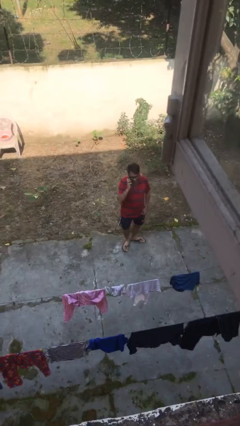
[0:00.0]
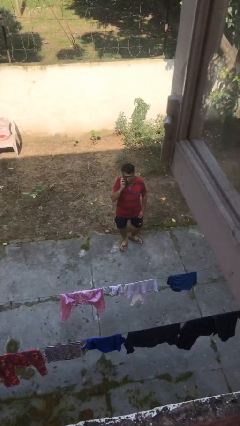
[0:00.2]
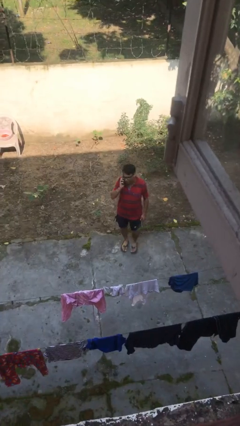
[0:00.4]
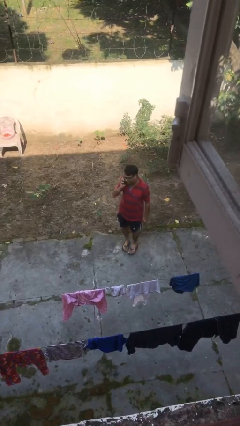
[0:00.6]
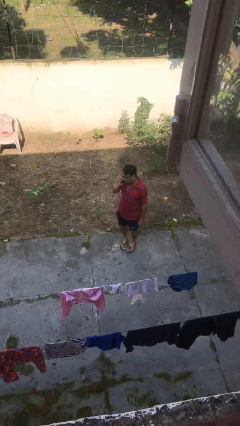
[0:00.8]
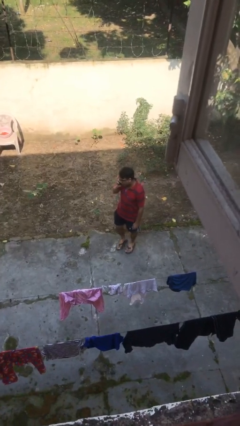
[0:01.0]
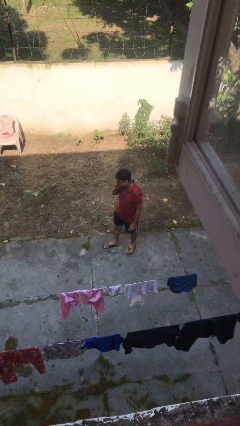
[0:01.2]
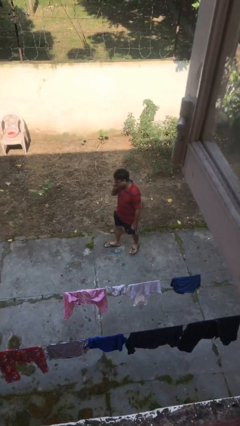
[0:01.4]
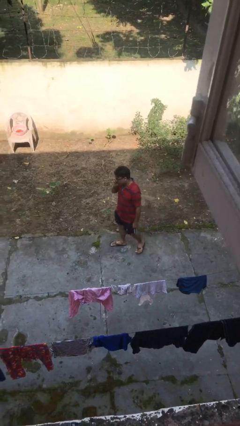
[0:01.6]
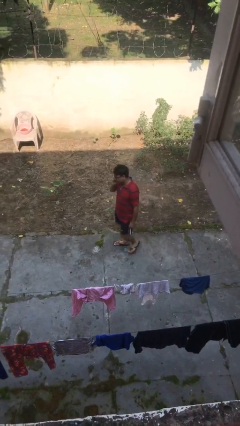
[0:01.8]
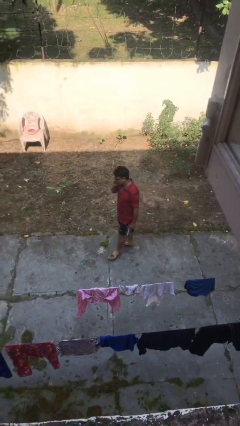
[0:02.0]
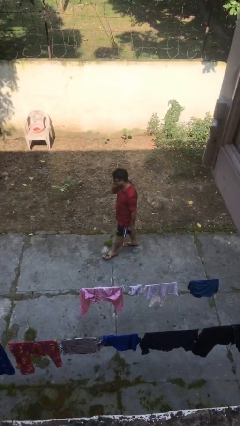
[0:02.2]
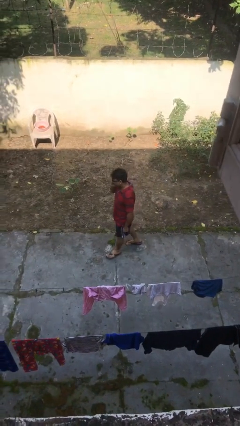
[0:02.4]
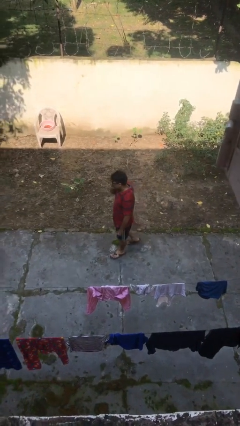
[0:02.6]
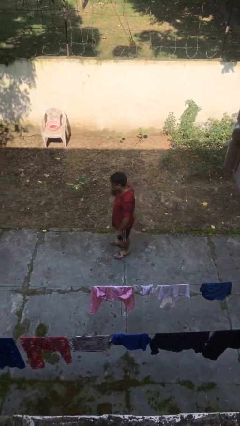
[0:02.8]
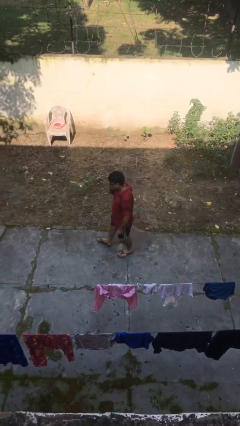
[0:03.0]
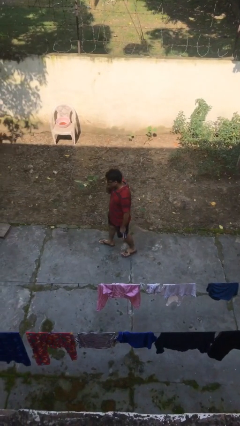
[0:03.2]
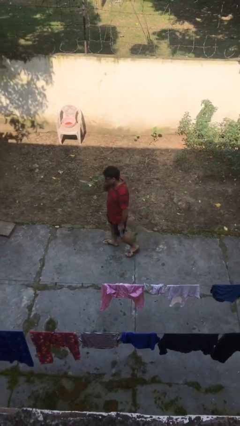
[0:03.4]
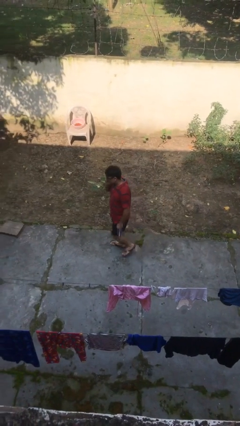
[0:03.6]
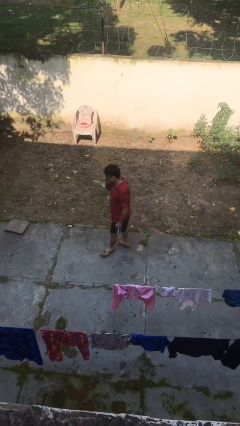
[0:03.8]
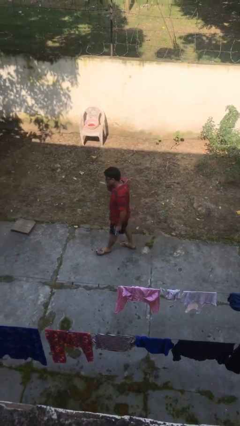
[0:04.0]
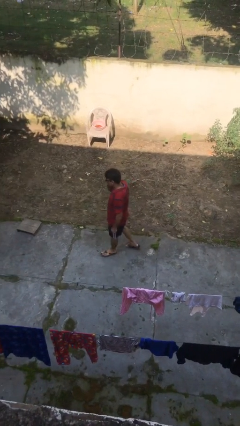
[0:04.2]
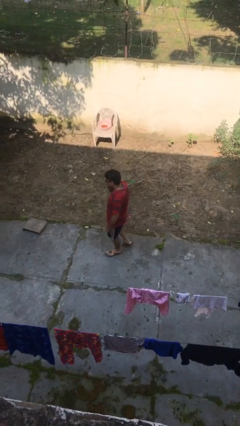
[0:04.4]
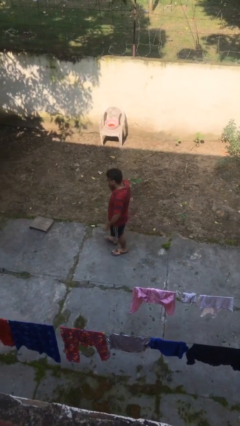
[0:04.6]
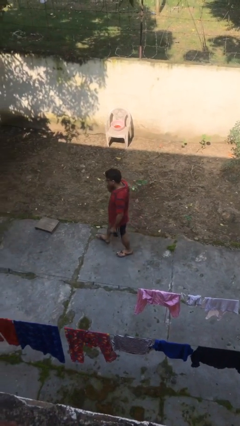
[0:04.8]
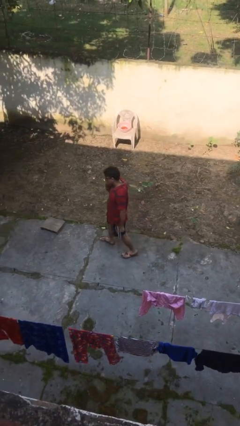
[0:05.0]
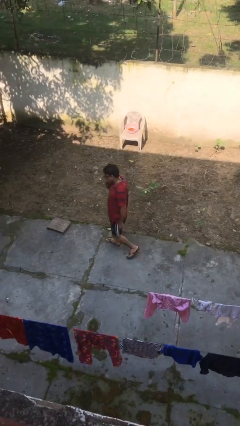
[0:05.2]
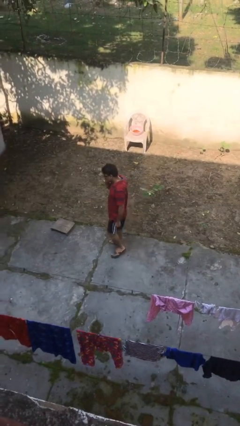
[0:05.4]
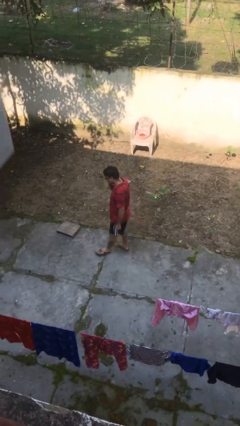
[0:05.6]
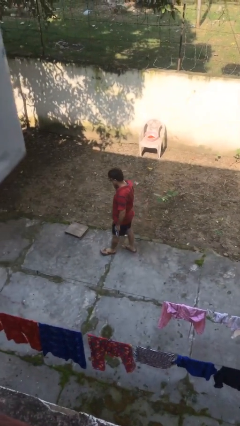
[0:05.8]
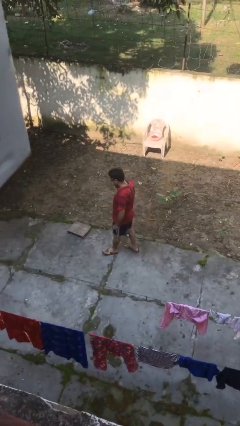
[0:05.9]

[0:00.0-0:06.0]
person talks on phone

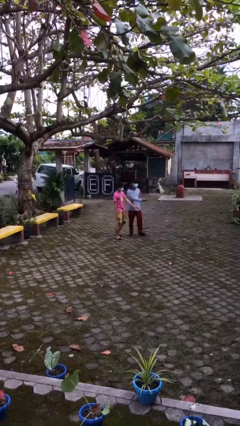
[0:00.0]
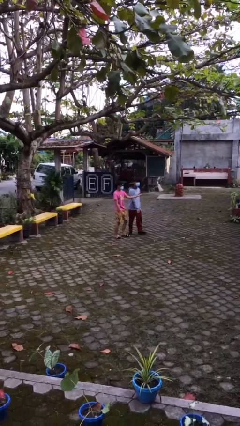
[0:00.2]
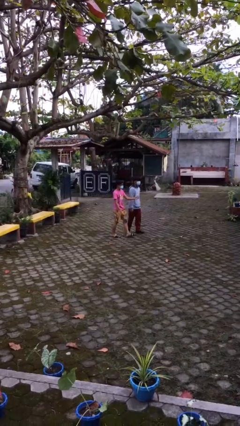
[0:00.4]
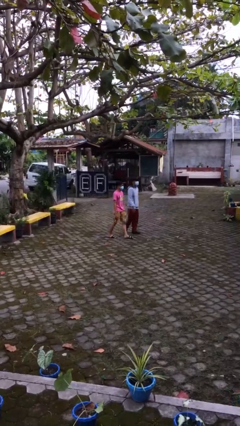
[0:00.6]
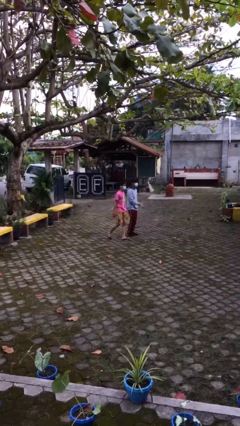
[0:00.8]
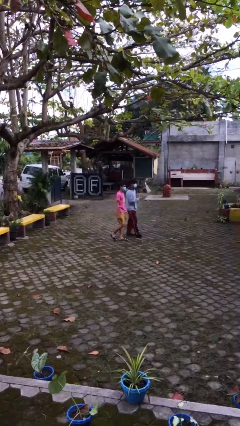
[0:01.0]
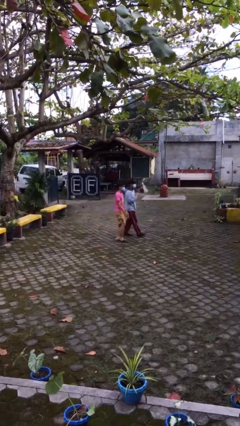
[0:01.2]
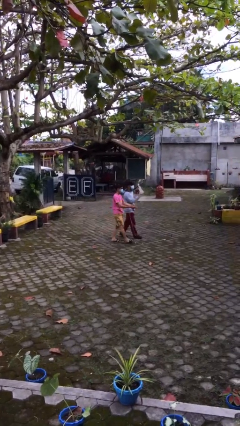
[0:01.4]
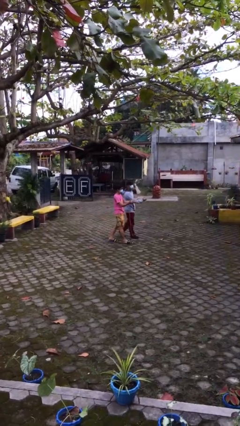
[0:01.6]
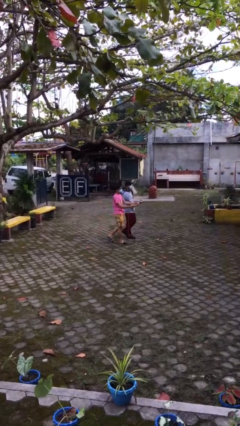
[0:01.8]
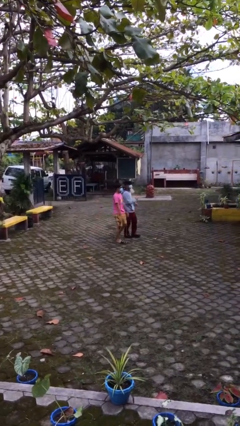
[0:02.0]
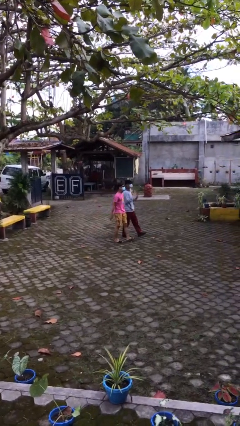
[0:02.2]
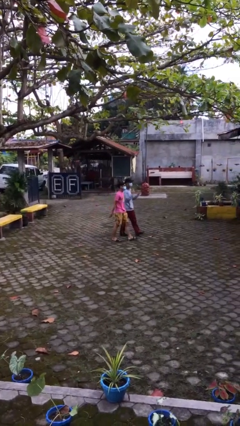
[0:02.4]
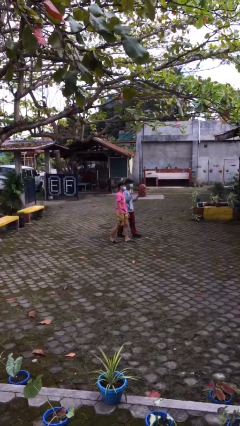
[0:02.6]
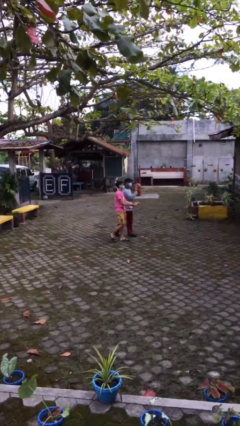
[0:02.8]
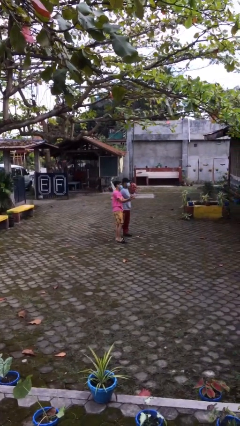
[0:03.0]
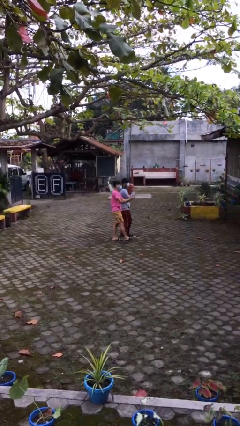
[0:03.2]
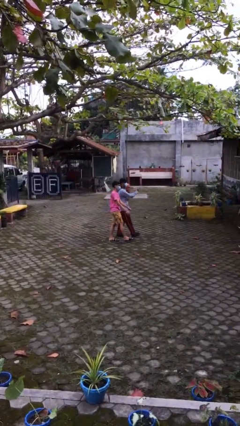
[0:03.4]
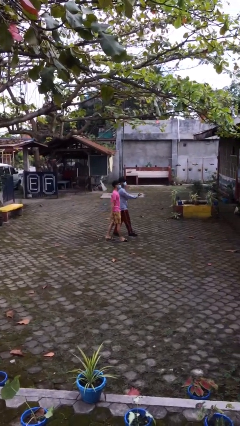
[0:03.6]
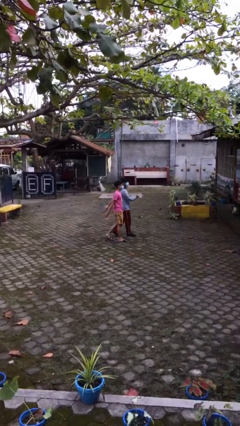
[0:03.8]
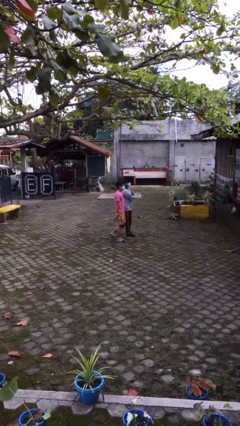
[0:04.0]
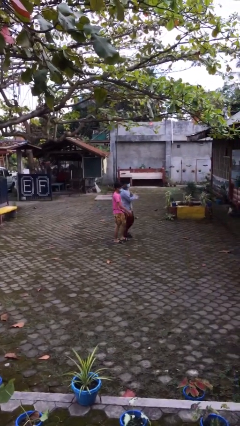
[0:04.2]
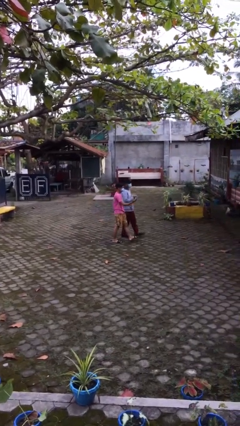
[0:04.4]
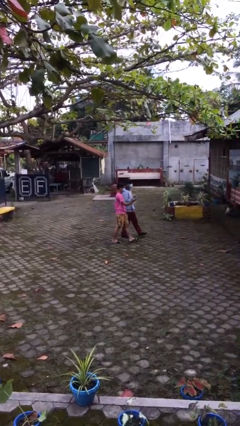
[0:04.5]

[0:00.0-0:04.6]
person talks to person

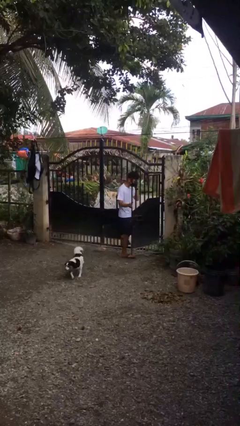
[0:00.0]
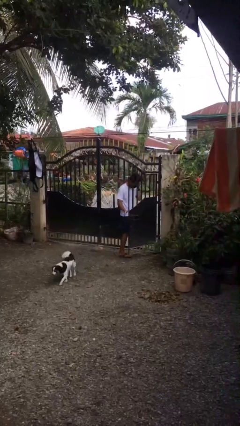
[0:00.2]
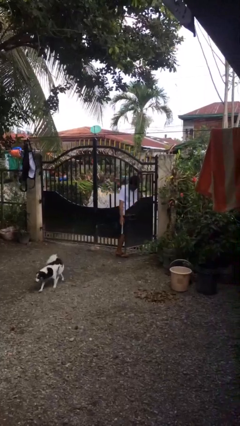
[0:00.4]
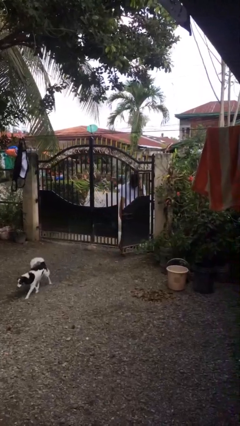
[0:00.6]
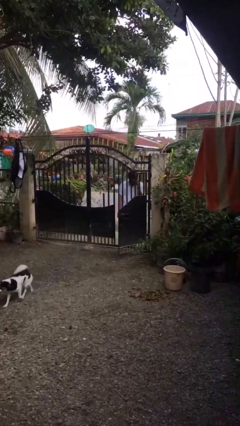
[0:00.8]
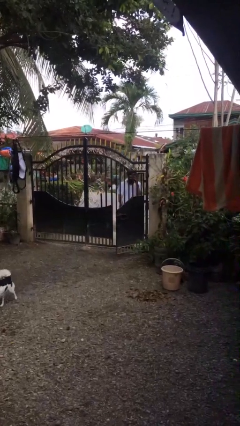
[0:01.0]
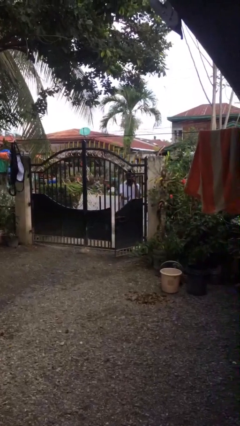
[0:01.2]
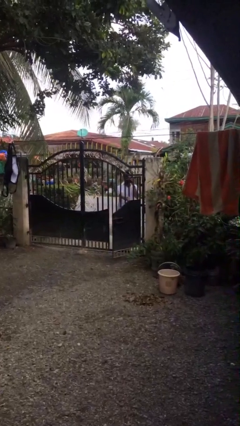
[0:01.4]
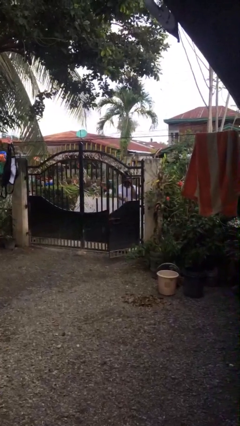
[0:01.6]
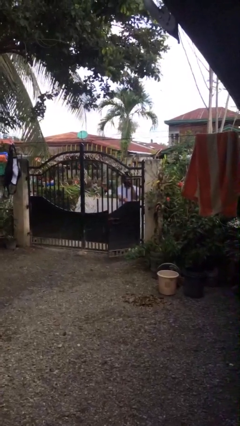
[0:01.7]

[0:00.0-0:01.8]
person exits scene through structure

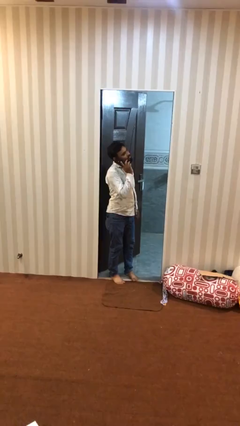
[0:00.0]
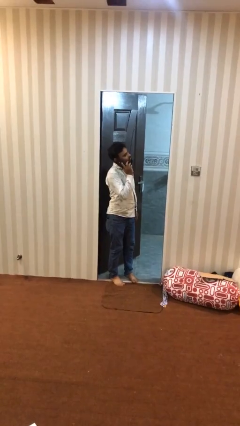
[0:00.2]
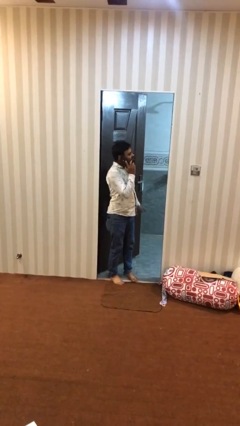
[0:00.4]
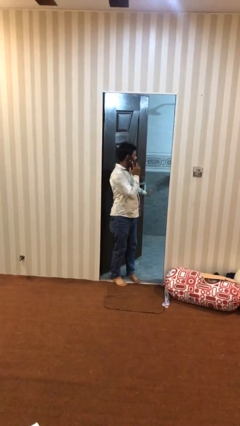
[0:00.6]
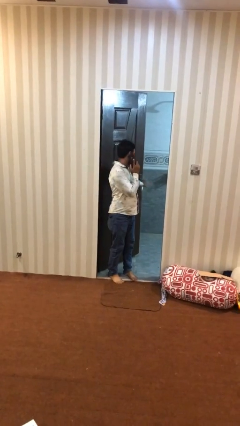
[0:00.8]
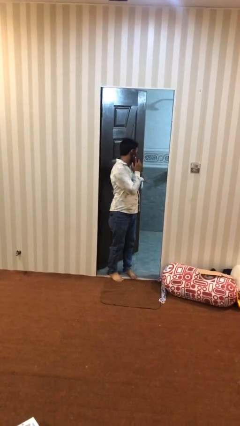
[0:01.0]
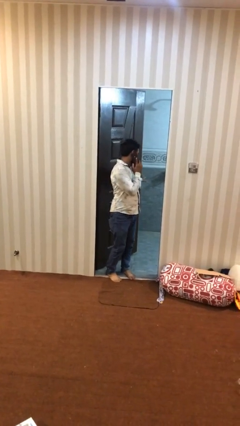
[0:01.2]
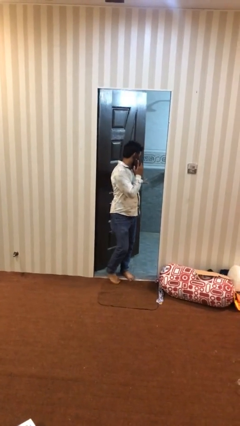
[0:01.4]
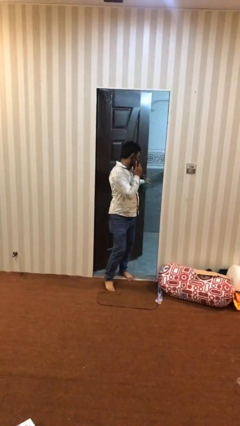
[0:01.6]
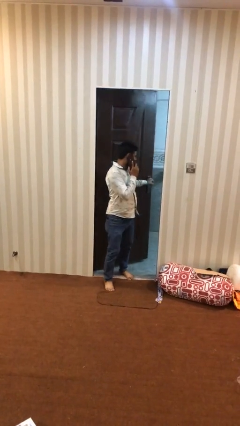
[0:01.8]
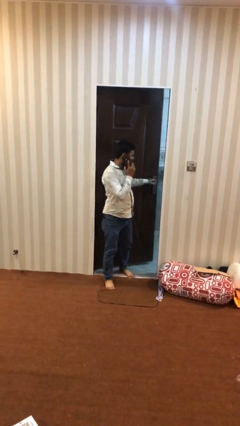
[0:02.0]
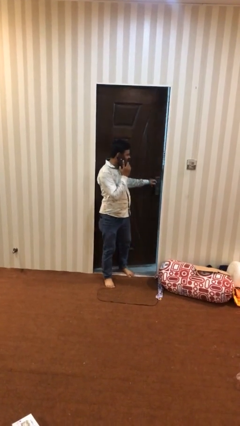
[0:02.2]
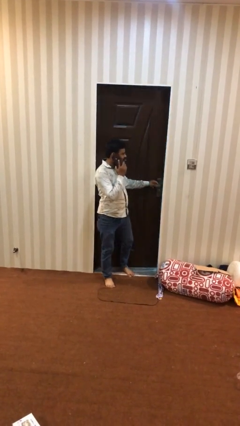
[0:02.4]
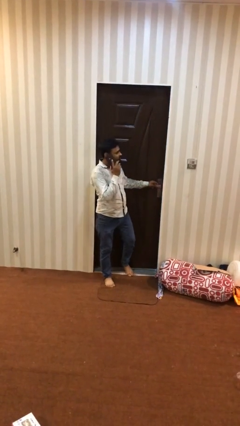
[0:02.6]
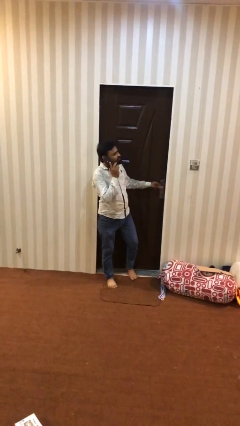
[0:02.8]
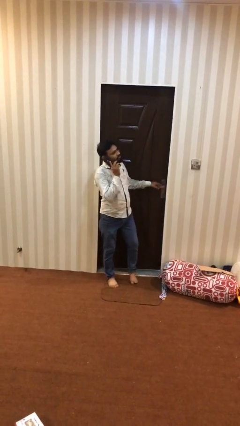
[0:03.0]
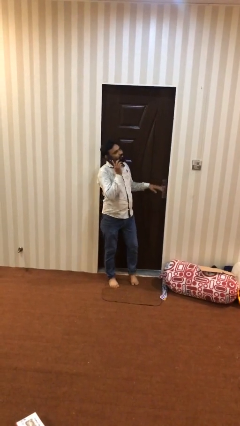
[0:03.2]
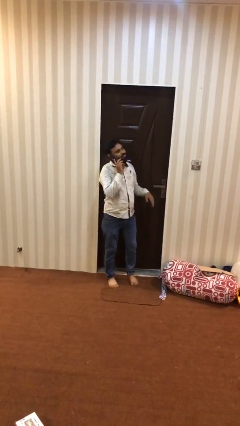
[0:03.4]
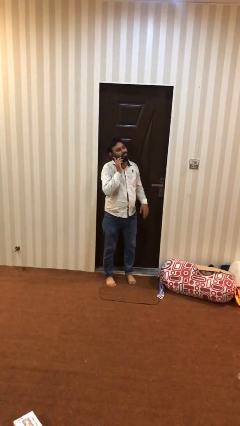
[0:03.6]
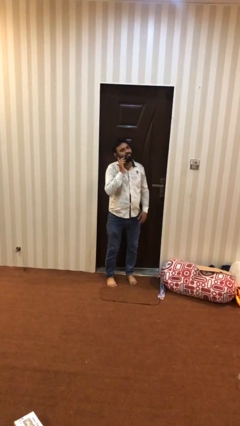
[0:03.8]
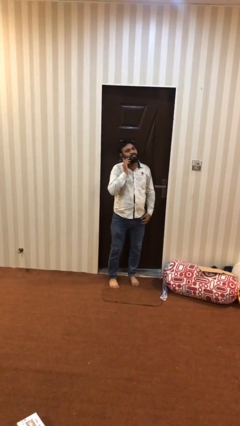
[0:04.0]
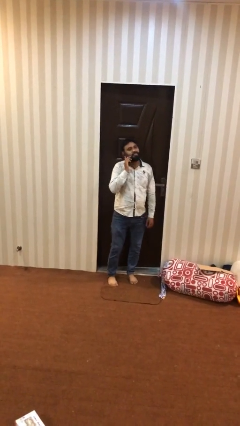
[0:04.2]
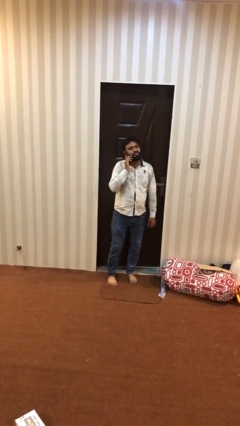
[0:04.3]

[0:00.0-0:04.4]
person closes facility door

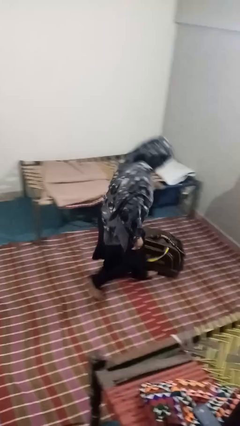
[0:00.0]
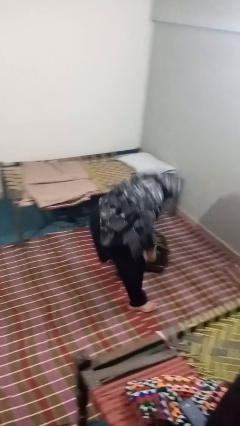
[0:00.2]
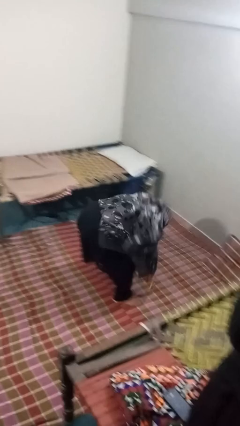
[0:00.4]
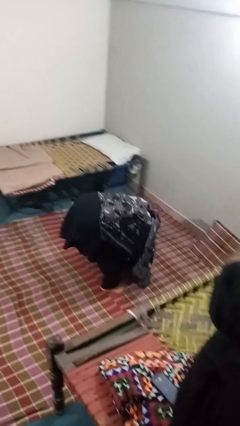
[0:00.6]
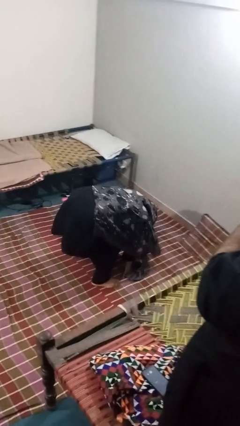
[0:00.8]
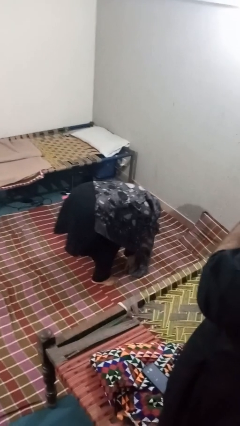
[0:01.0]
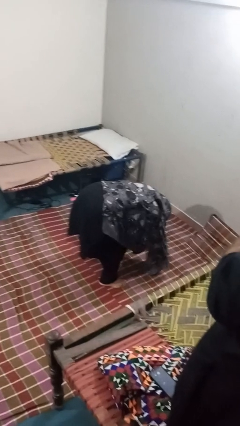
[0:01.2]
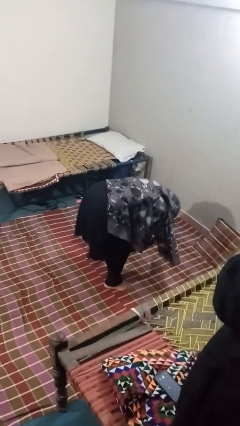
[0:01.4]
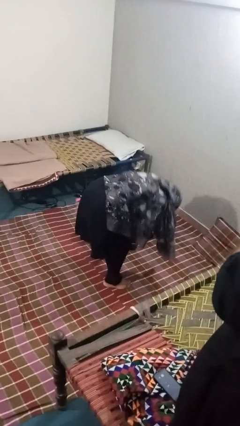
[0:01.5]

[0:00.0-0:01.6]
person trips on object on floor
